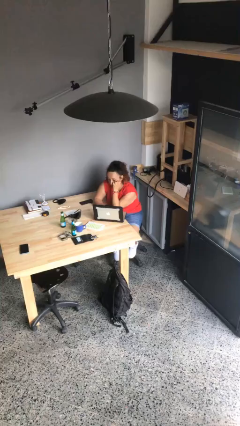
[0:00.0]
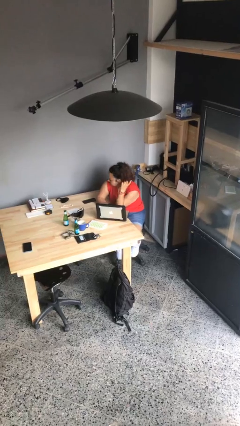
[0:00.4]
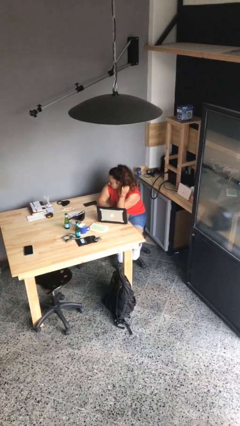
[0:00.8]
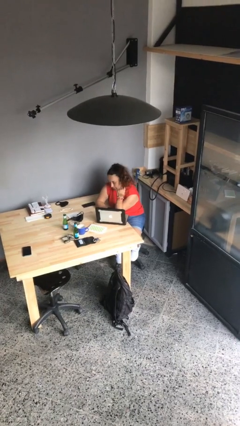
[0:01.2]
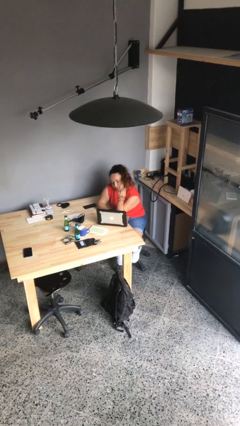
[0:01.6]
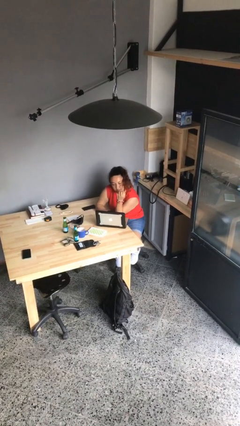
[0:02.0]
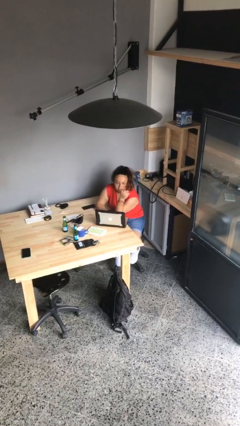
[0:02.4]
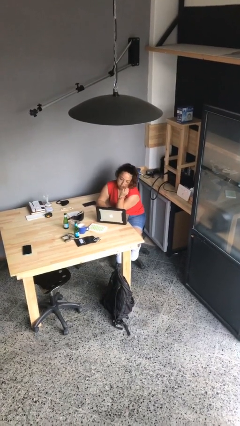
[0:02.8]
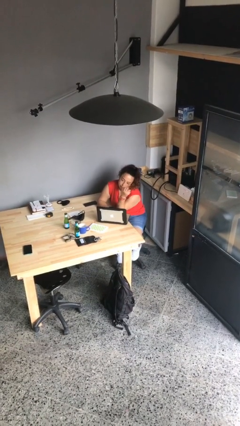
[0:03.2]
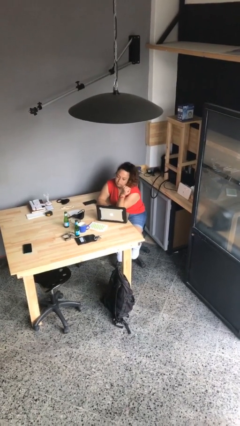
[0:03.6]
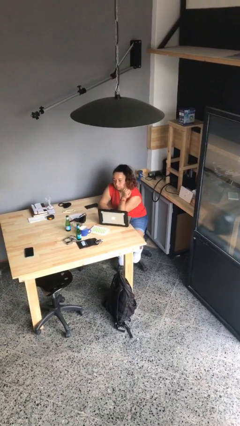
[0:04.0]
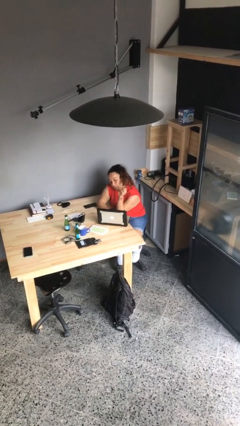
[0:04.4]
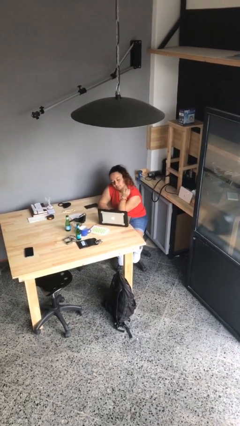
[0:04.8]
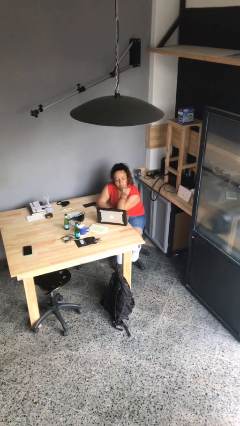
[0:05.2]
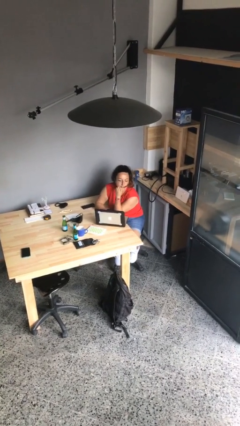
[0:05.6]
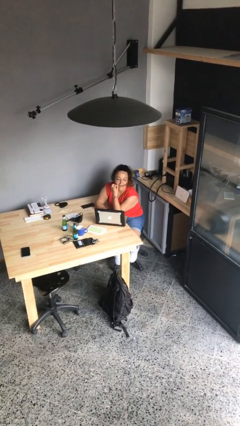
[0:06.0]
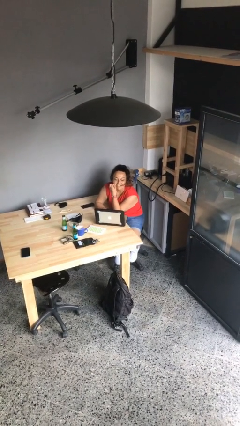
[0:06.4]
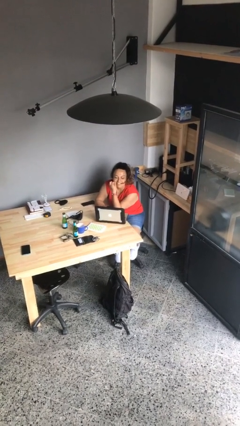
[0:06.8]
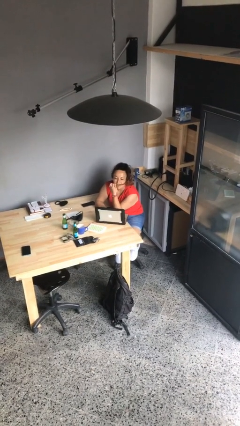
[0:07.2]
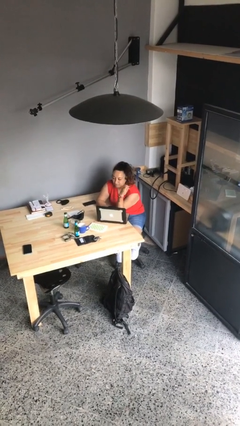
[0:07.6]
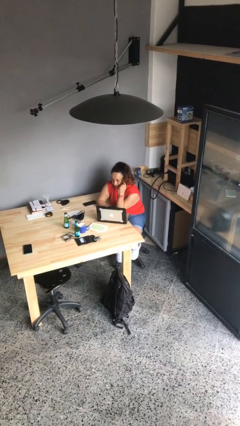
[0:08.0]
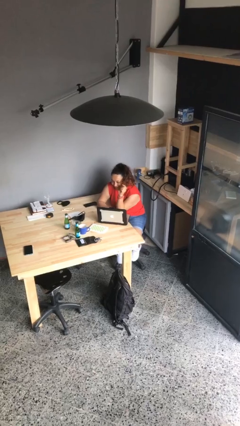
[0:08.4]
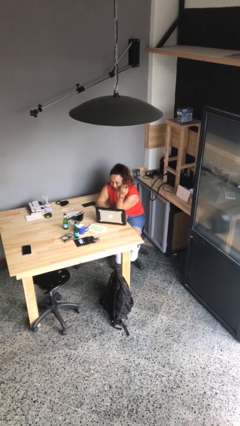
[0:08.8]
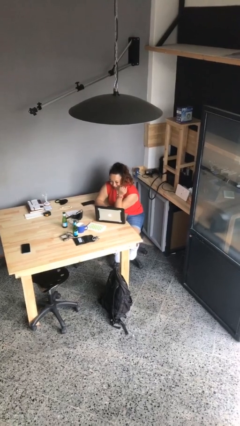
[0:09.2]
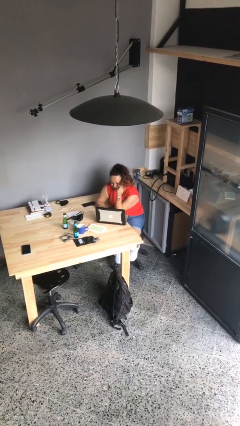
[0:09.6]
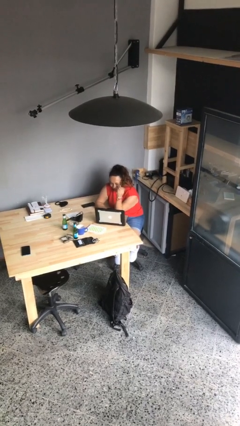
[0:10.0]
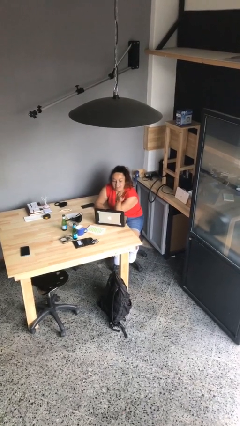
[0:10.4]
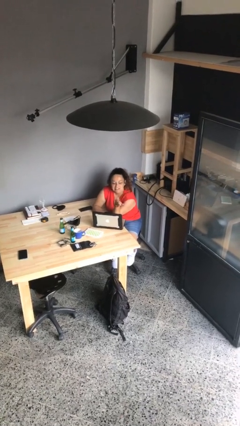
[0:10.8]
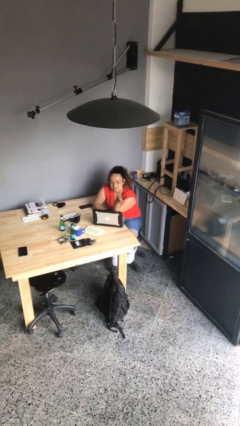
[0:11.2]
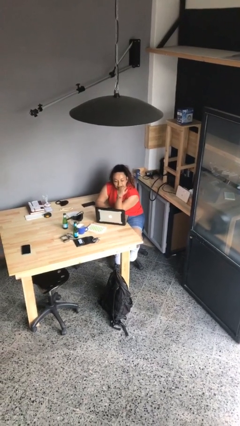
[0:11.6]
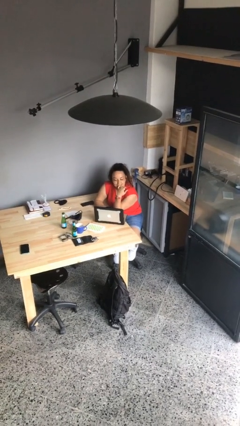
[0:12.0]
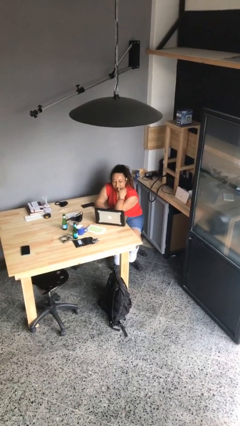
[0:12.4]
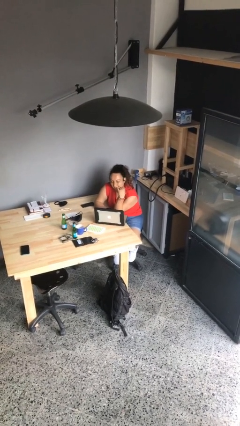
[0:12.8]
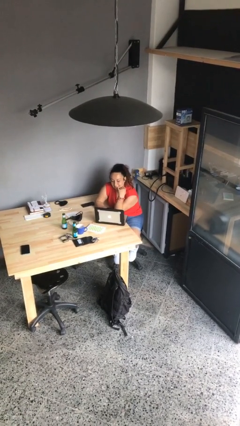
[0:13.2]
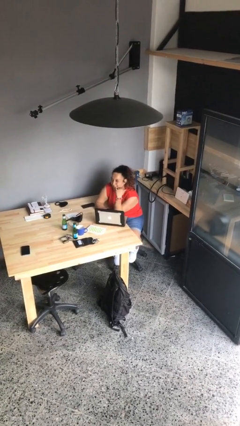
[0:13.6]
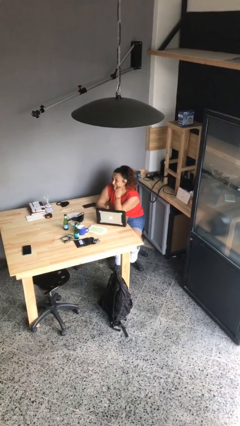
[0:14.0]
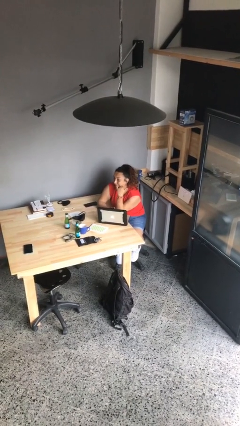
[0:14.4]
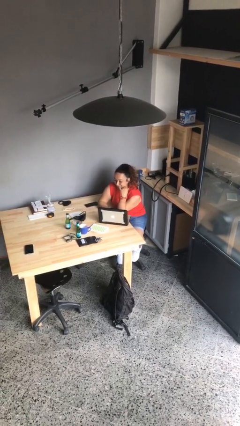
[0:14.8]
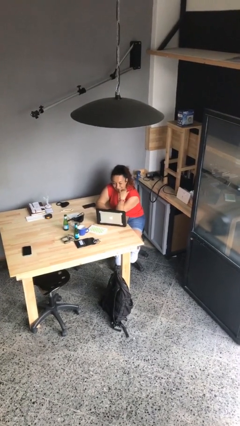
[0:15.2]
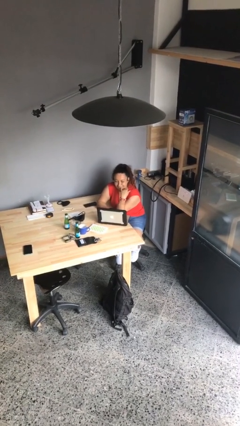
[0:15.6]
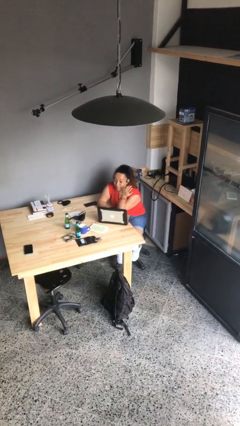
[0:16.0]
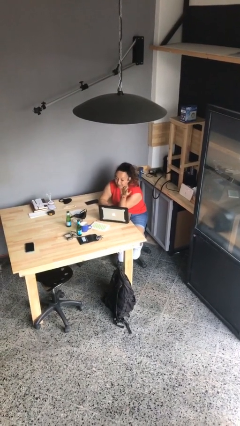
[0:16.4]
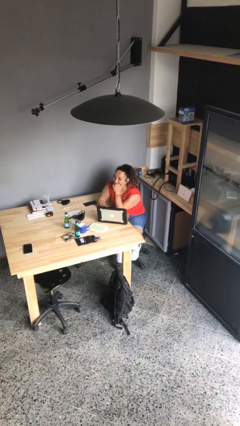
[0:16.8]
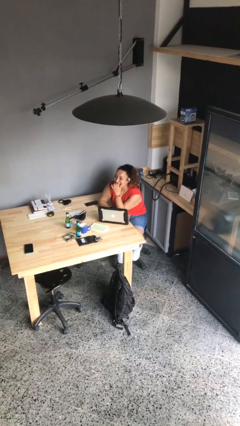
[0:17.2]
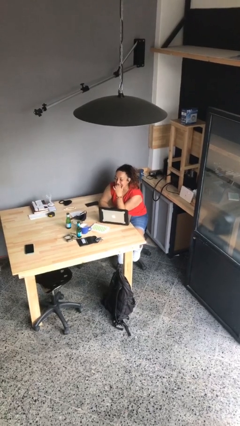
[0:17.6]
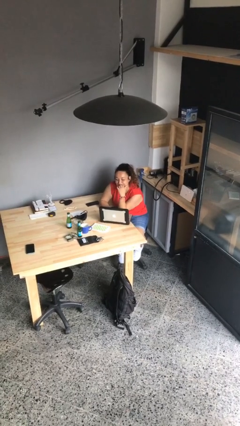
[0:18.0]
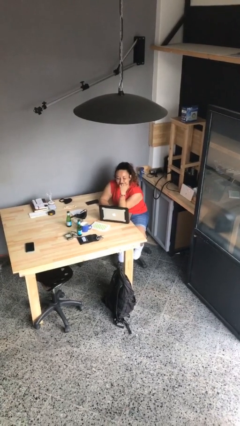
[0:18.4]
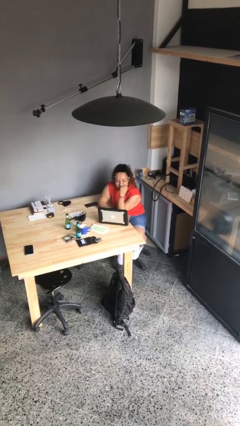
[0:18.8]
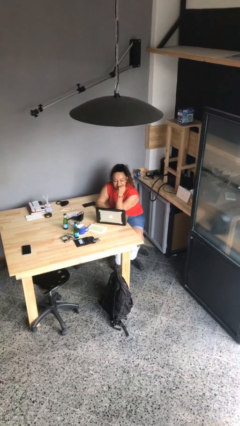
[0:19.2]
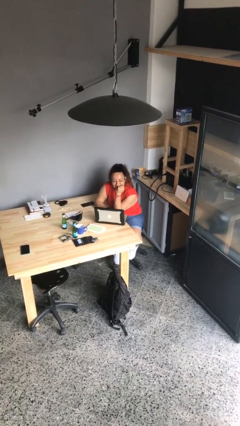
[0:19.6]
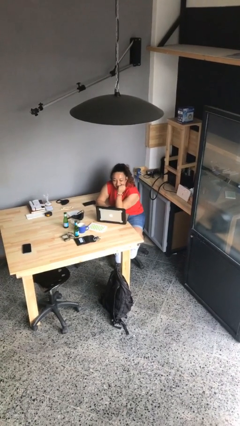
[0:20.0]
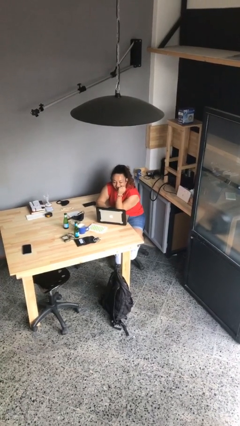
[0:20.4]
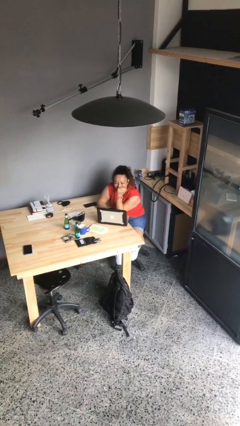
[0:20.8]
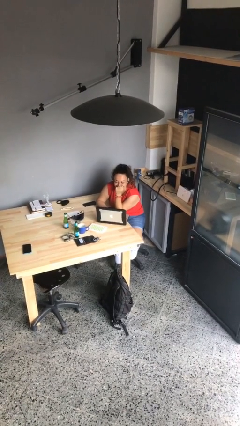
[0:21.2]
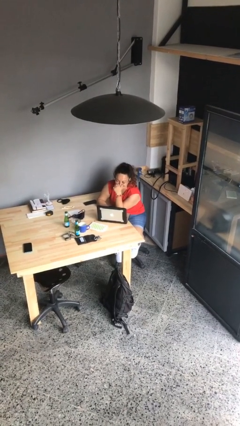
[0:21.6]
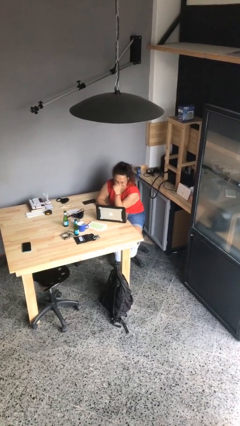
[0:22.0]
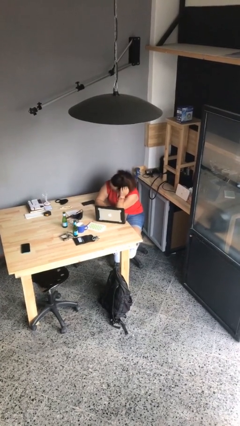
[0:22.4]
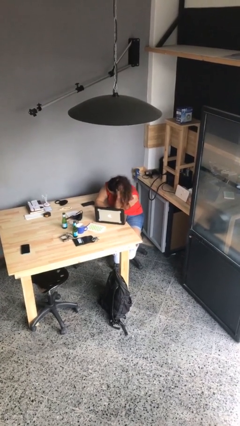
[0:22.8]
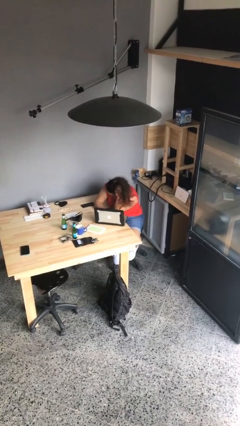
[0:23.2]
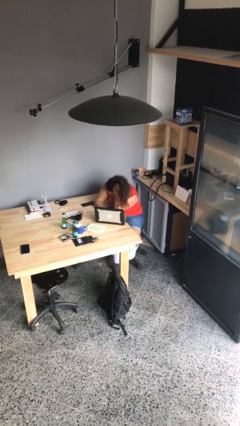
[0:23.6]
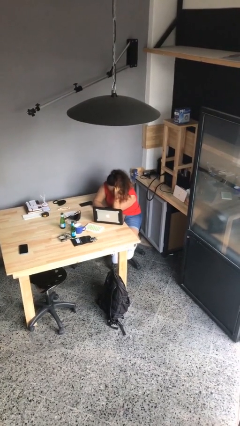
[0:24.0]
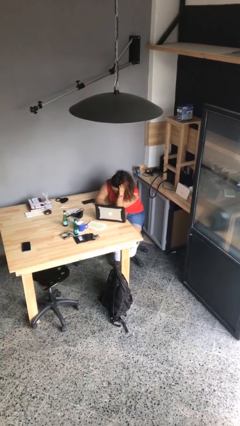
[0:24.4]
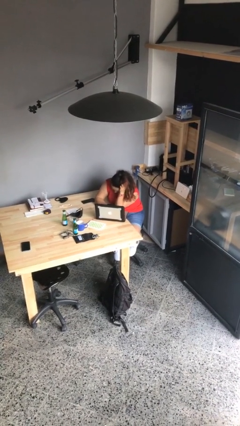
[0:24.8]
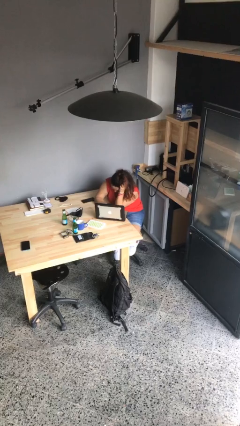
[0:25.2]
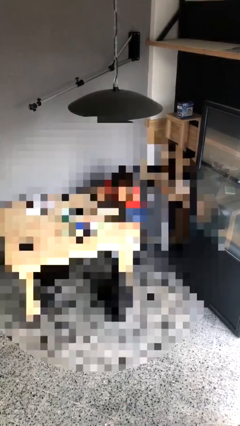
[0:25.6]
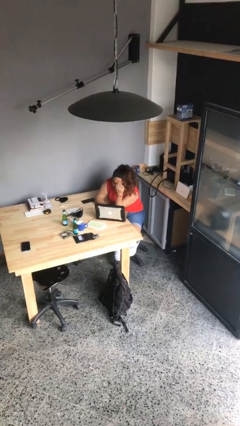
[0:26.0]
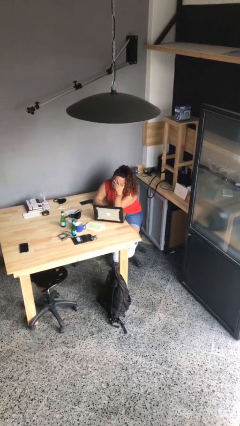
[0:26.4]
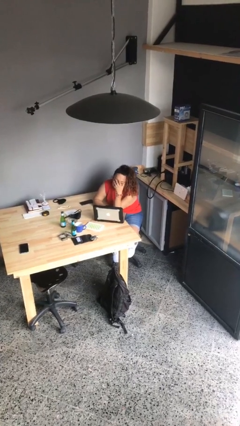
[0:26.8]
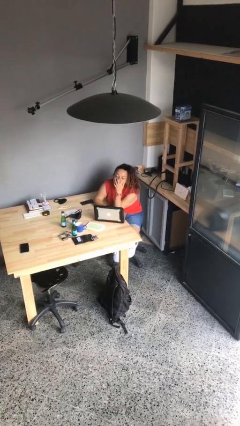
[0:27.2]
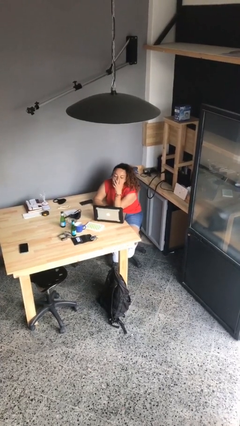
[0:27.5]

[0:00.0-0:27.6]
person interacts with laptop

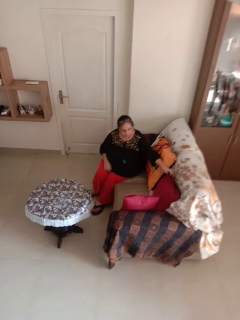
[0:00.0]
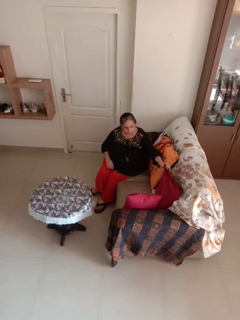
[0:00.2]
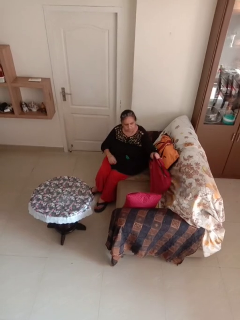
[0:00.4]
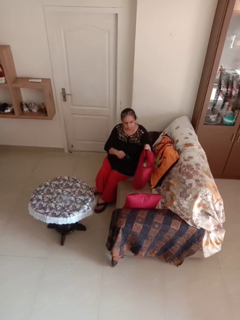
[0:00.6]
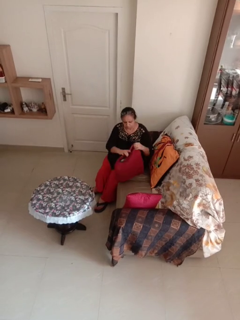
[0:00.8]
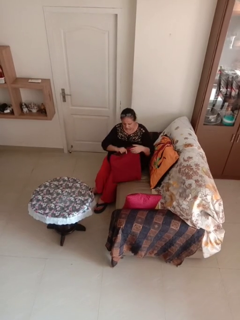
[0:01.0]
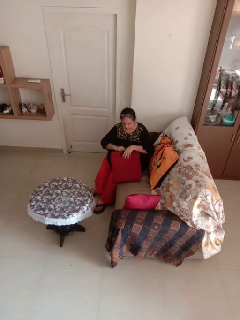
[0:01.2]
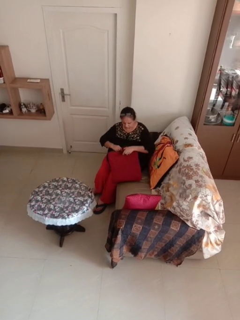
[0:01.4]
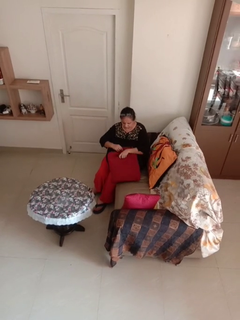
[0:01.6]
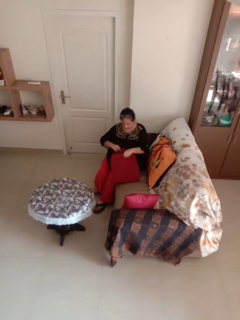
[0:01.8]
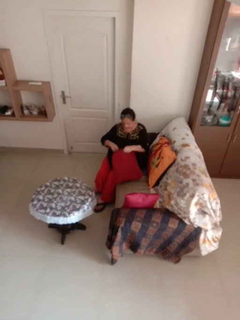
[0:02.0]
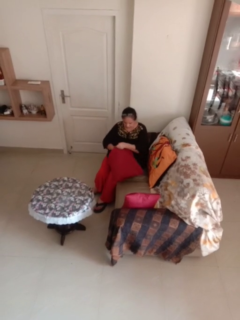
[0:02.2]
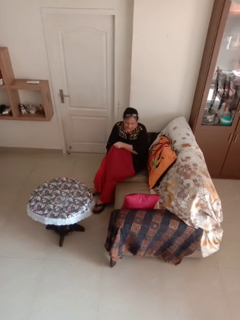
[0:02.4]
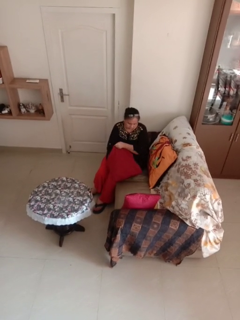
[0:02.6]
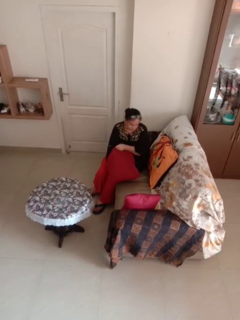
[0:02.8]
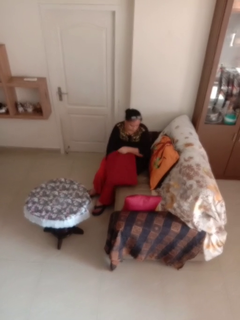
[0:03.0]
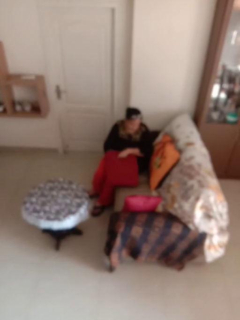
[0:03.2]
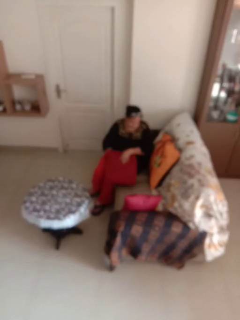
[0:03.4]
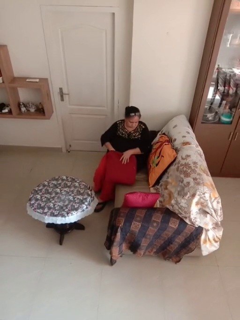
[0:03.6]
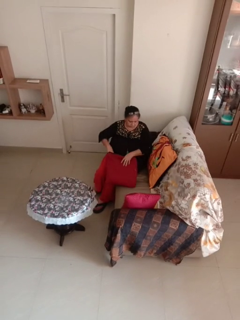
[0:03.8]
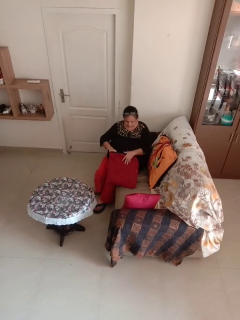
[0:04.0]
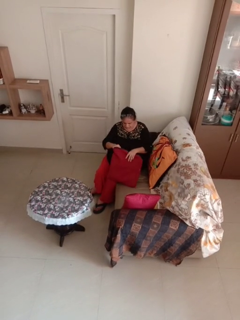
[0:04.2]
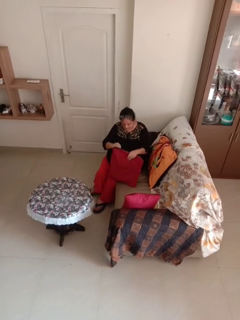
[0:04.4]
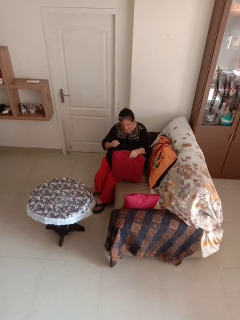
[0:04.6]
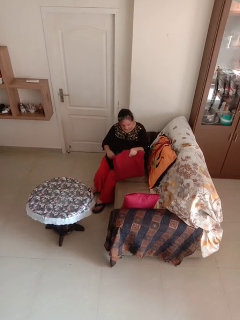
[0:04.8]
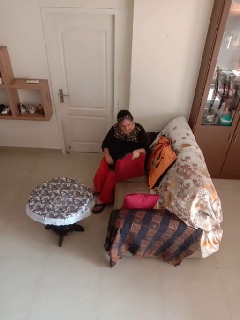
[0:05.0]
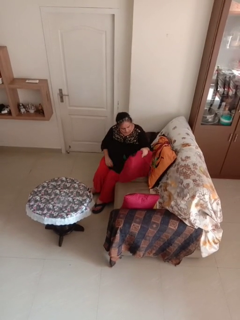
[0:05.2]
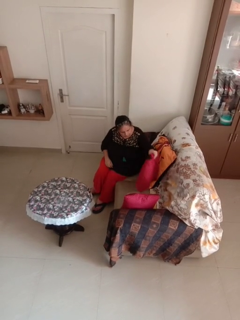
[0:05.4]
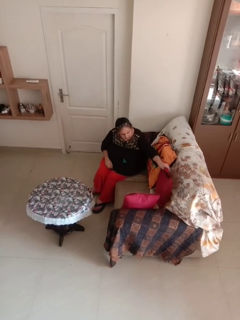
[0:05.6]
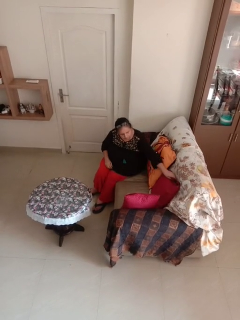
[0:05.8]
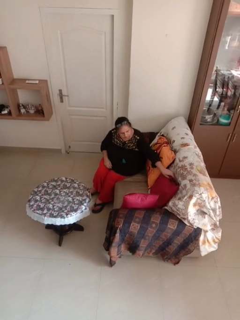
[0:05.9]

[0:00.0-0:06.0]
person searches in couch
